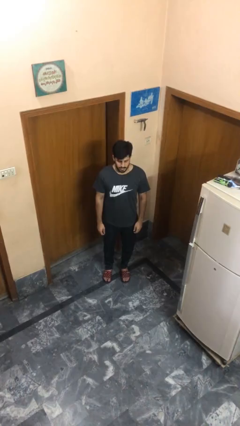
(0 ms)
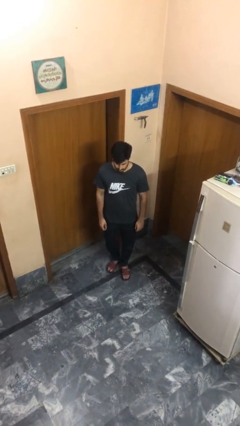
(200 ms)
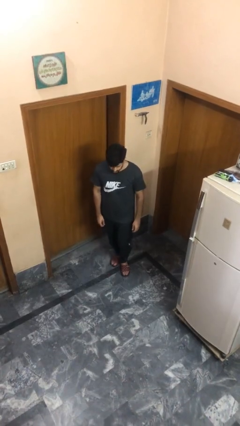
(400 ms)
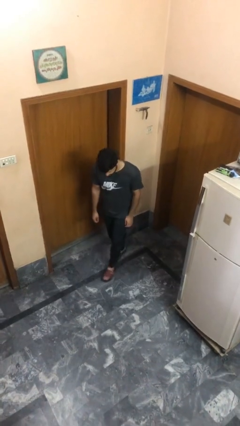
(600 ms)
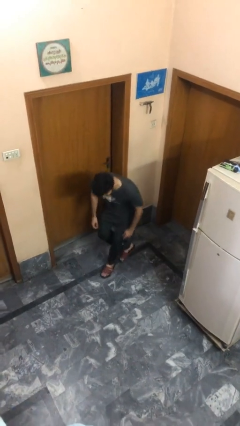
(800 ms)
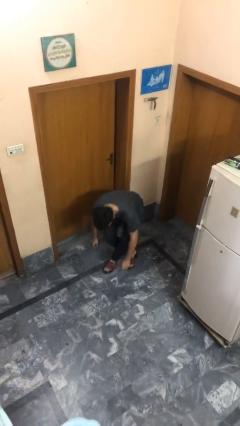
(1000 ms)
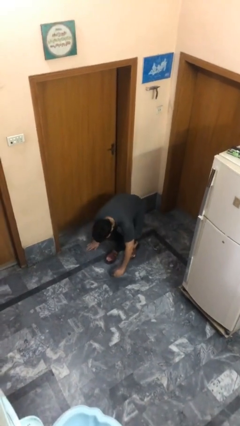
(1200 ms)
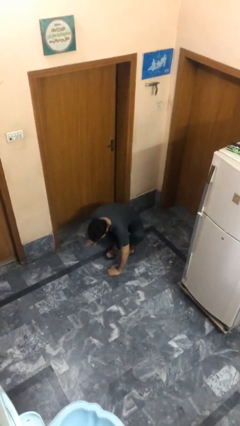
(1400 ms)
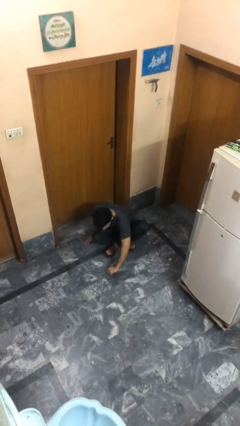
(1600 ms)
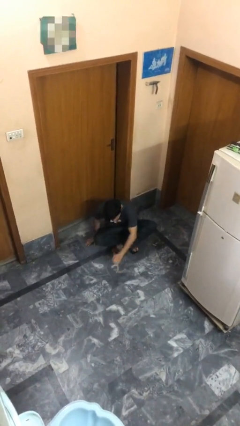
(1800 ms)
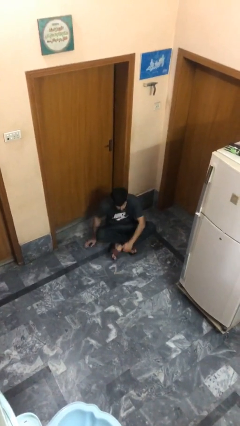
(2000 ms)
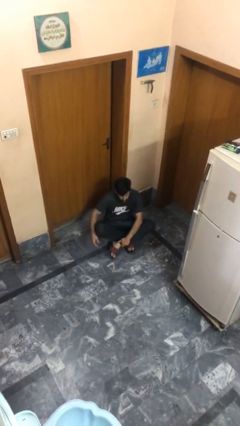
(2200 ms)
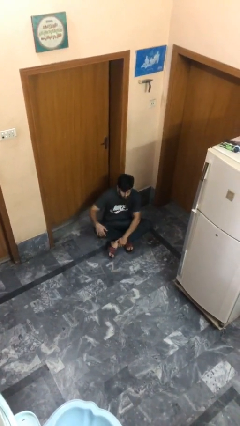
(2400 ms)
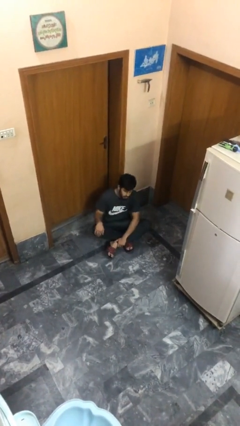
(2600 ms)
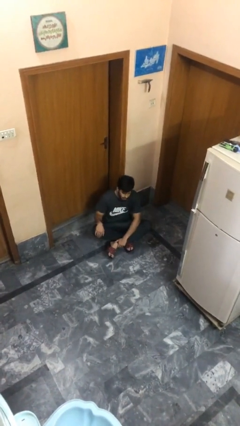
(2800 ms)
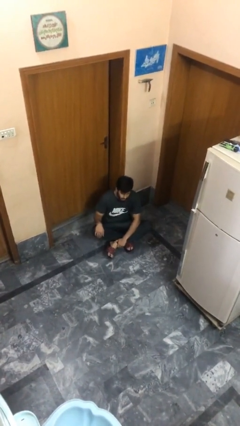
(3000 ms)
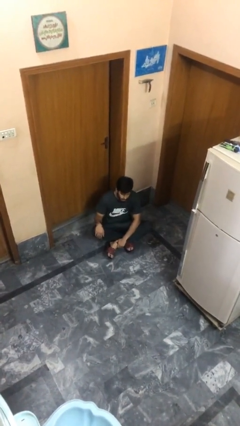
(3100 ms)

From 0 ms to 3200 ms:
person sits crisscross

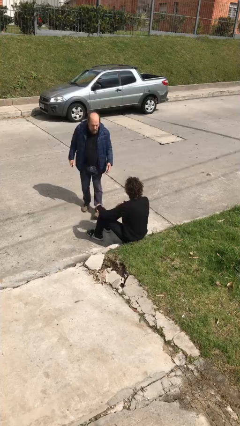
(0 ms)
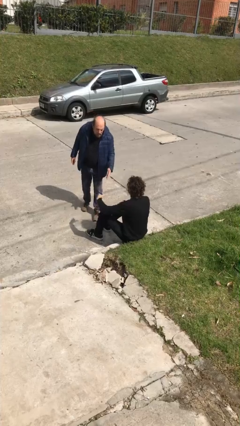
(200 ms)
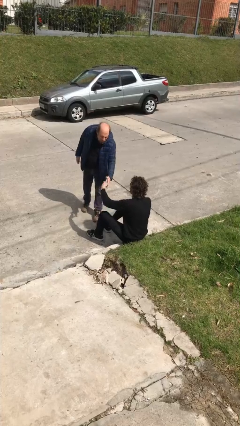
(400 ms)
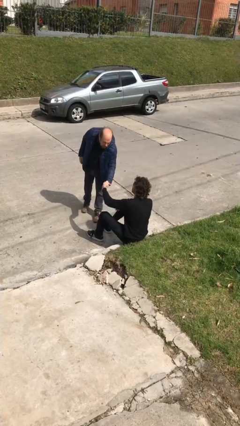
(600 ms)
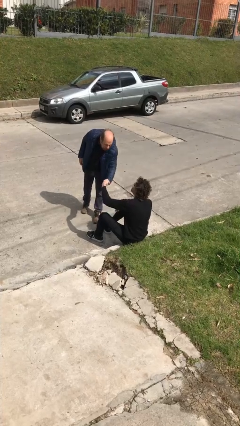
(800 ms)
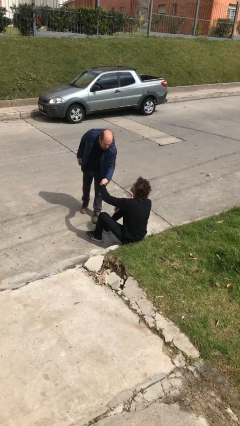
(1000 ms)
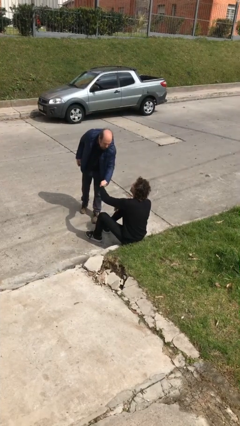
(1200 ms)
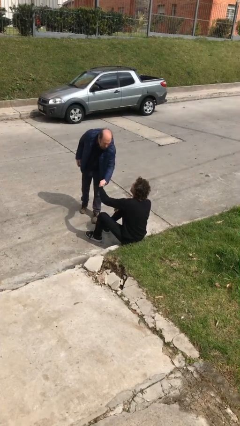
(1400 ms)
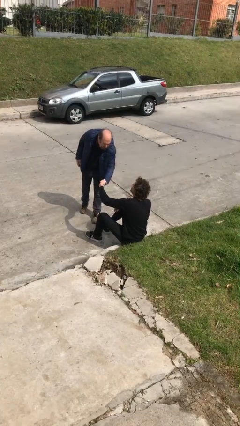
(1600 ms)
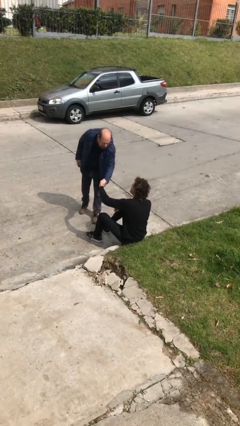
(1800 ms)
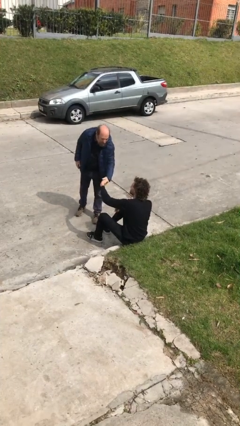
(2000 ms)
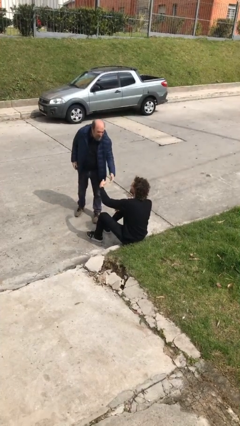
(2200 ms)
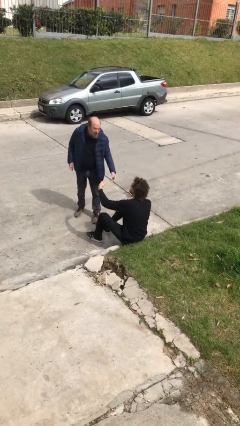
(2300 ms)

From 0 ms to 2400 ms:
person shakes hand

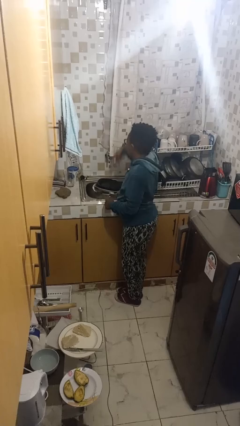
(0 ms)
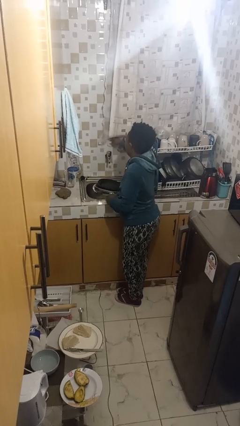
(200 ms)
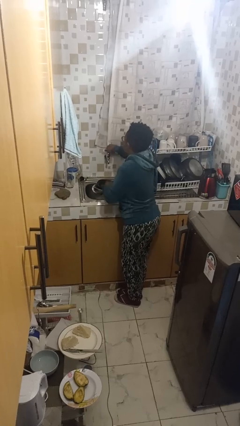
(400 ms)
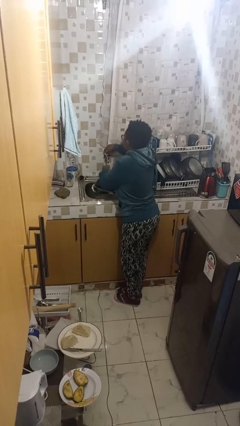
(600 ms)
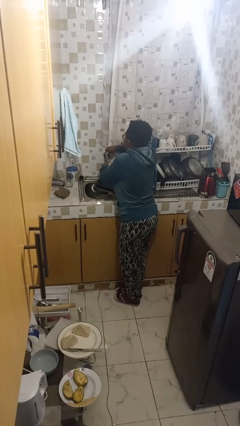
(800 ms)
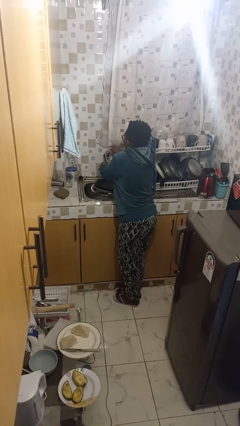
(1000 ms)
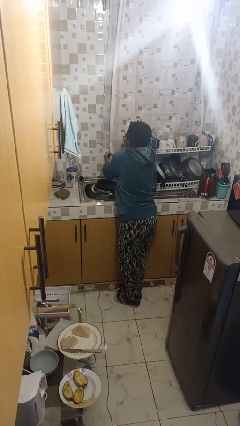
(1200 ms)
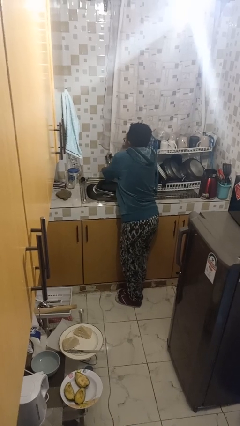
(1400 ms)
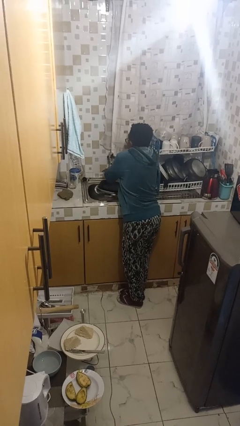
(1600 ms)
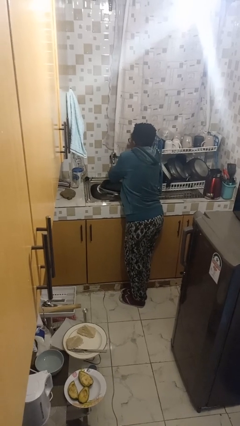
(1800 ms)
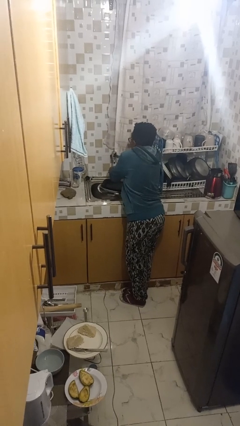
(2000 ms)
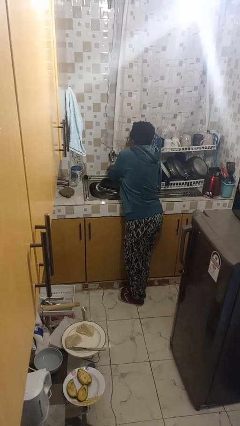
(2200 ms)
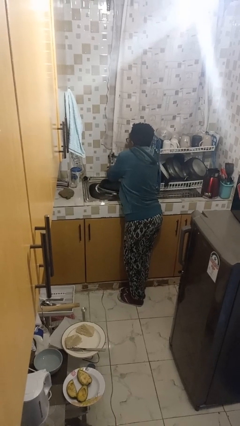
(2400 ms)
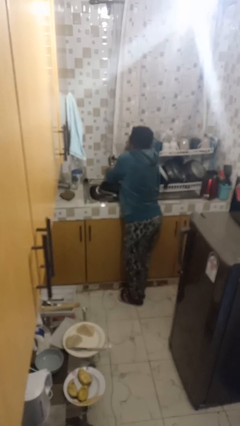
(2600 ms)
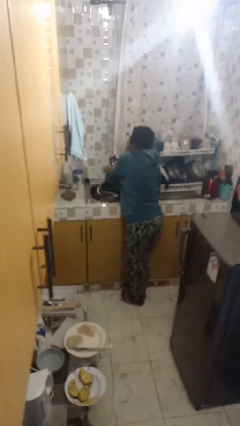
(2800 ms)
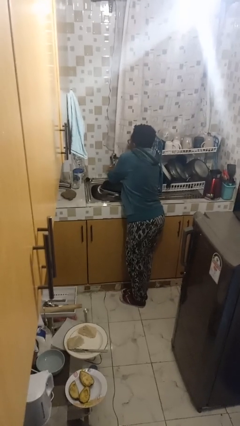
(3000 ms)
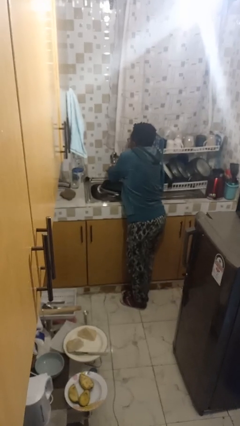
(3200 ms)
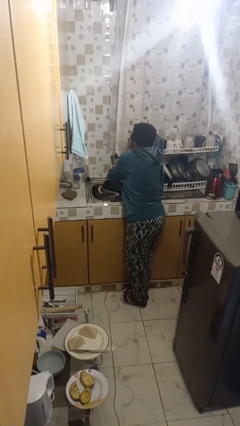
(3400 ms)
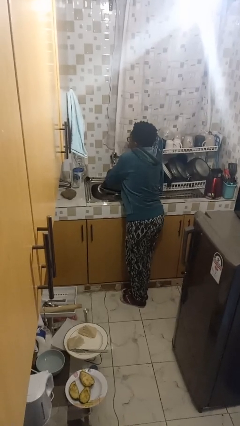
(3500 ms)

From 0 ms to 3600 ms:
person washes hands

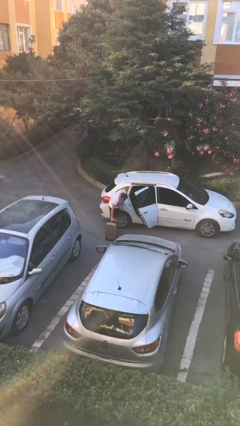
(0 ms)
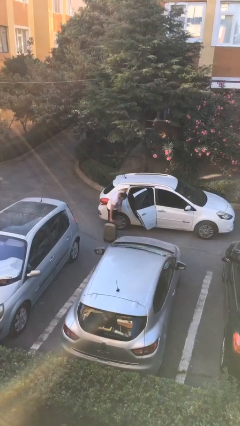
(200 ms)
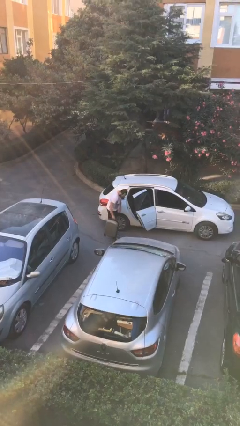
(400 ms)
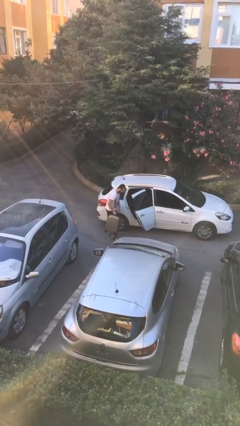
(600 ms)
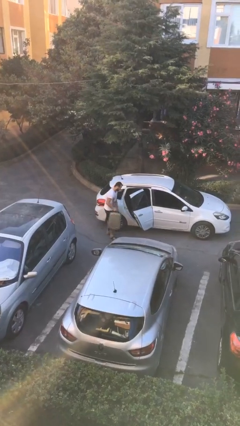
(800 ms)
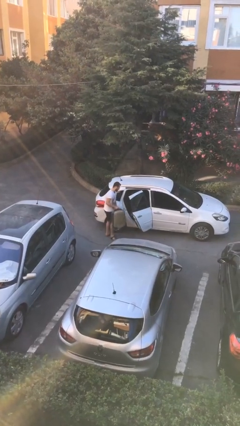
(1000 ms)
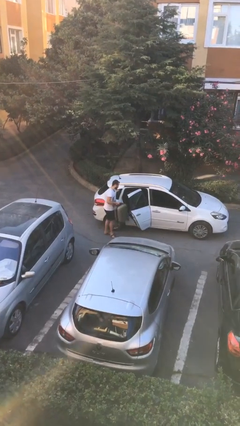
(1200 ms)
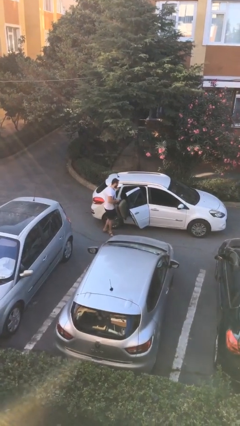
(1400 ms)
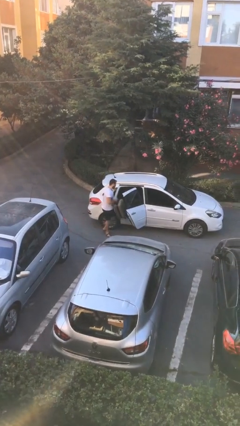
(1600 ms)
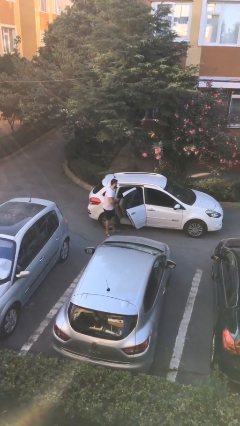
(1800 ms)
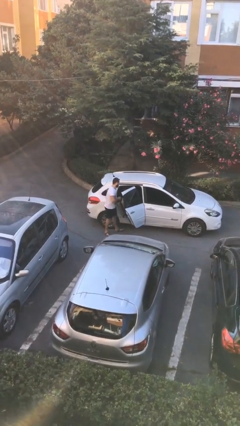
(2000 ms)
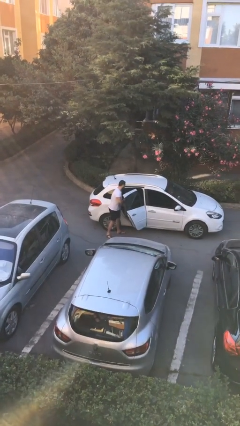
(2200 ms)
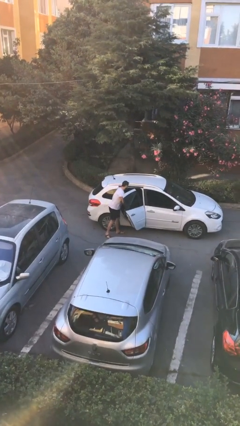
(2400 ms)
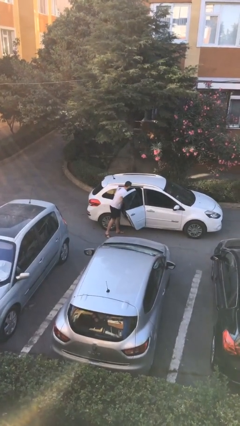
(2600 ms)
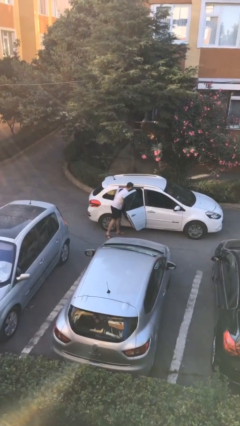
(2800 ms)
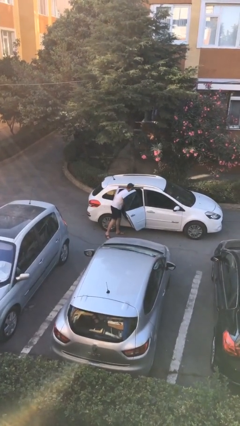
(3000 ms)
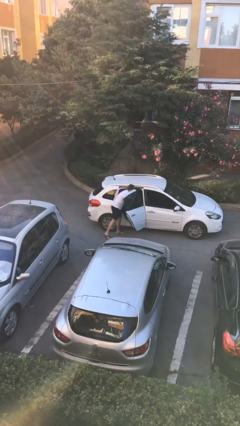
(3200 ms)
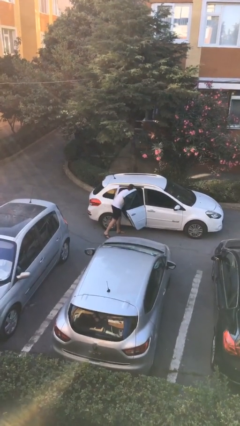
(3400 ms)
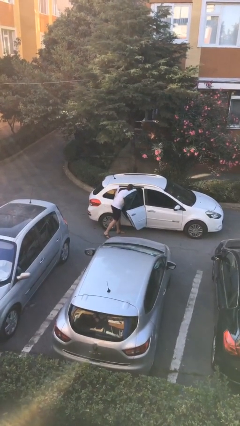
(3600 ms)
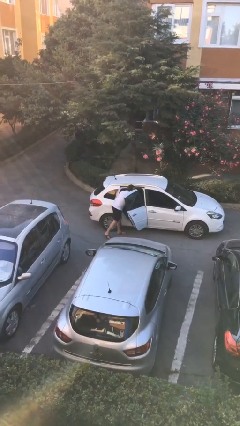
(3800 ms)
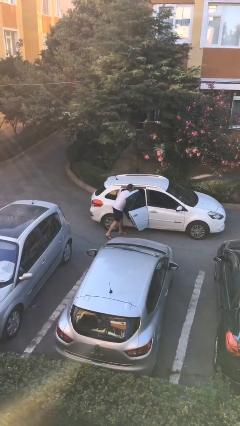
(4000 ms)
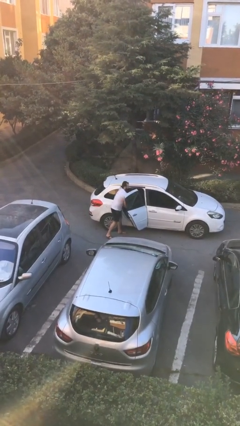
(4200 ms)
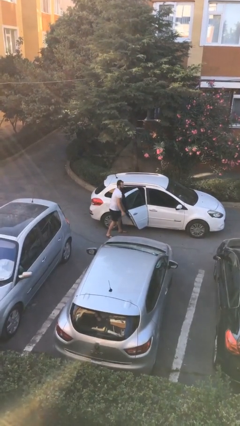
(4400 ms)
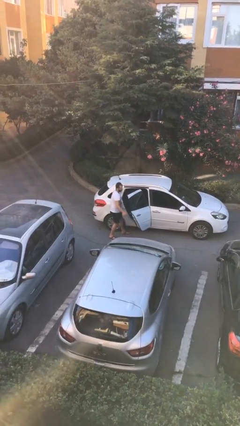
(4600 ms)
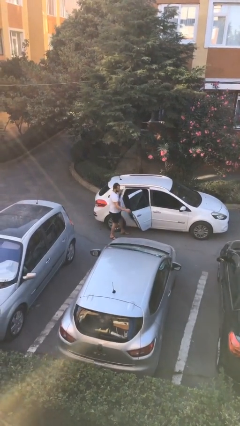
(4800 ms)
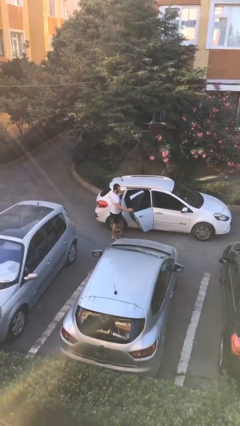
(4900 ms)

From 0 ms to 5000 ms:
person loads car

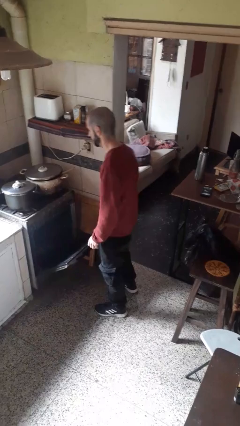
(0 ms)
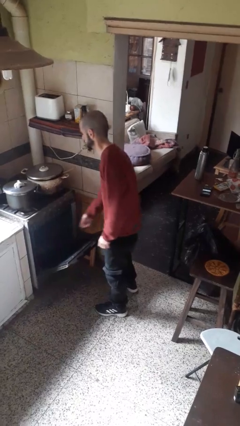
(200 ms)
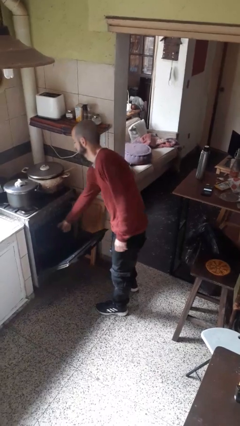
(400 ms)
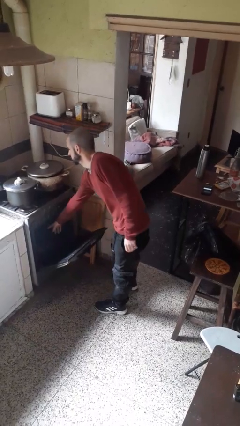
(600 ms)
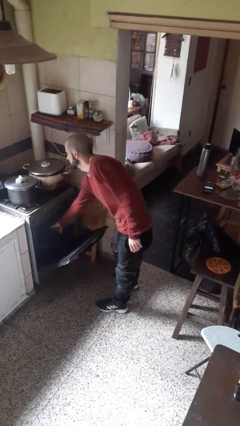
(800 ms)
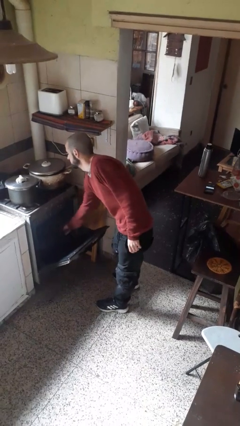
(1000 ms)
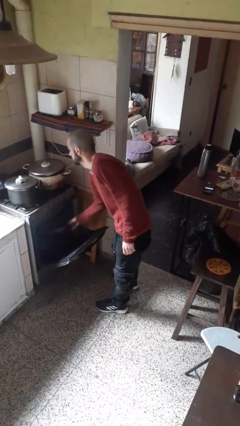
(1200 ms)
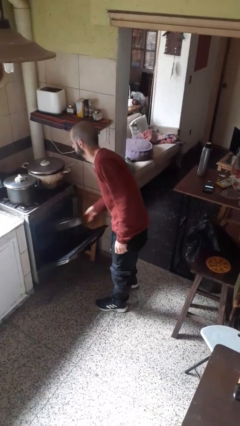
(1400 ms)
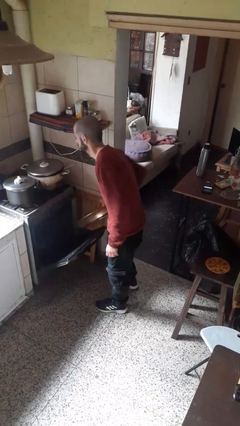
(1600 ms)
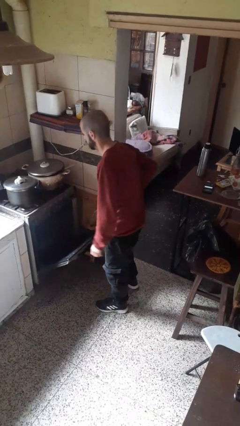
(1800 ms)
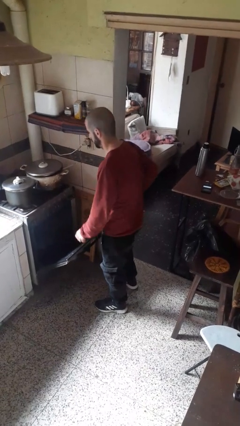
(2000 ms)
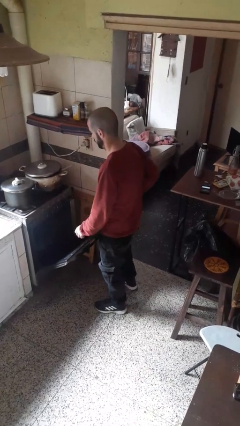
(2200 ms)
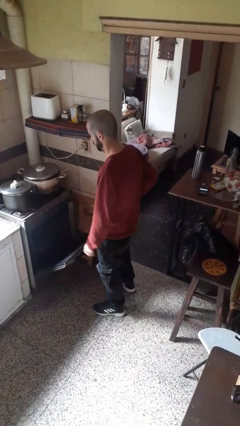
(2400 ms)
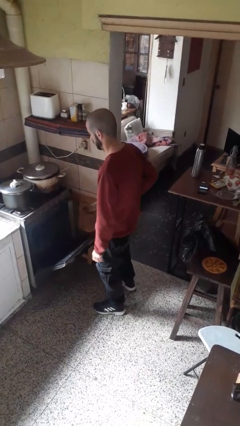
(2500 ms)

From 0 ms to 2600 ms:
person takes object from oven

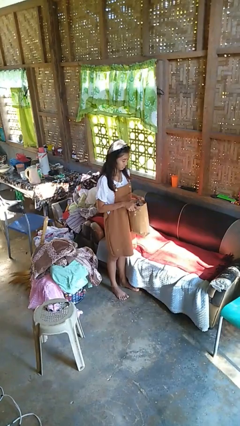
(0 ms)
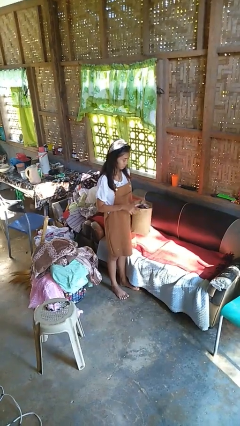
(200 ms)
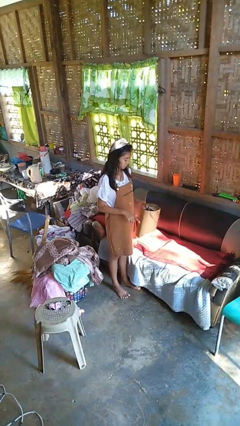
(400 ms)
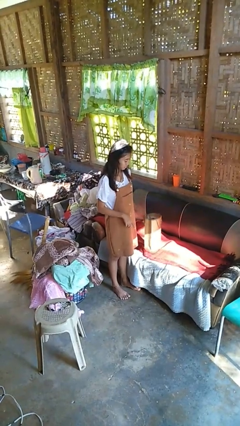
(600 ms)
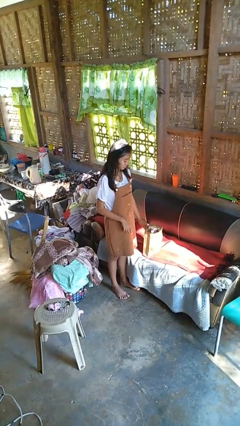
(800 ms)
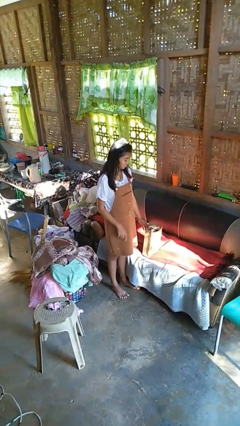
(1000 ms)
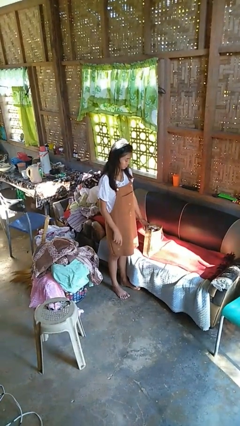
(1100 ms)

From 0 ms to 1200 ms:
person puts down object on couch
